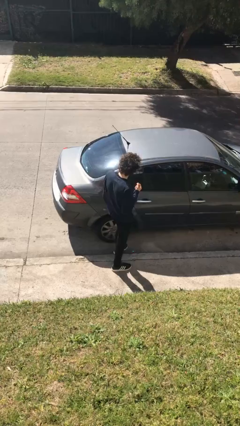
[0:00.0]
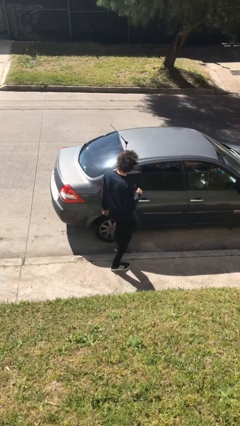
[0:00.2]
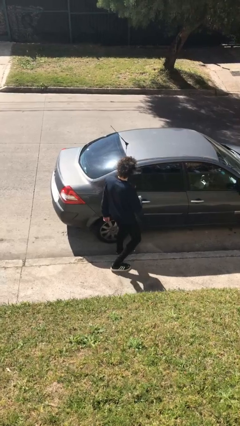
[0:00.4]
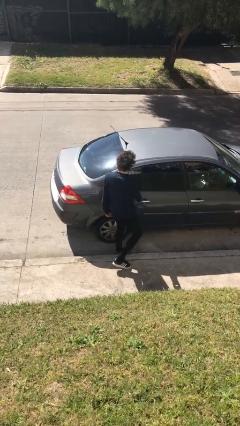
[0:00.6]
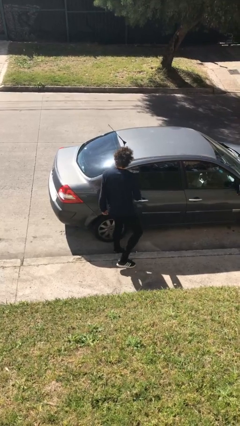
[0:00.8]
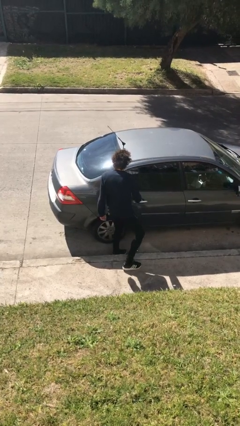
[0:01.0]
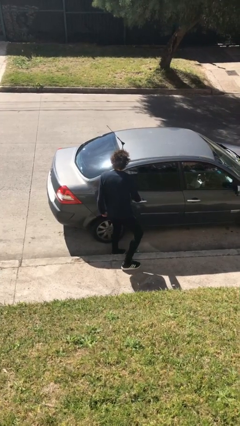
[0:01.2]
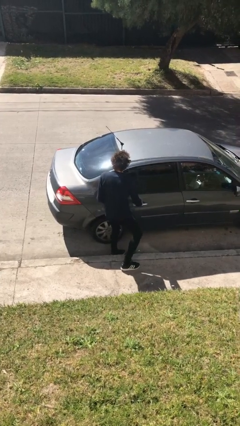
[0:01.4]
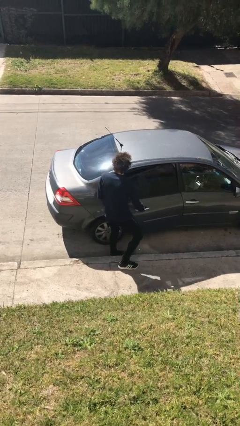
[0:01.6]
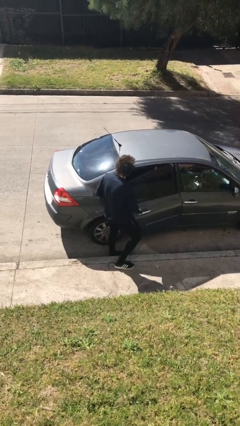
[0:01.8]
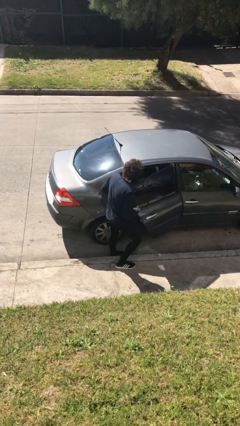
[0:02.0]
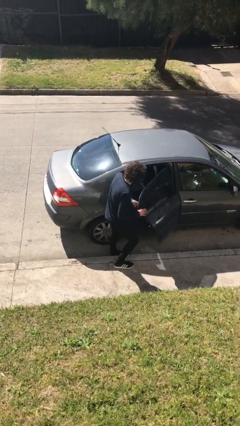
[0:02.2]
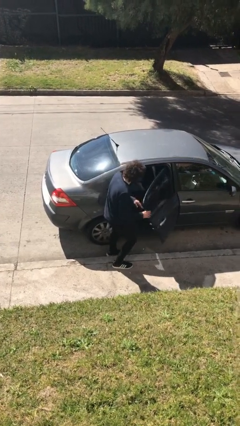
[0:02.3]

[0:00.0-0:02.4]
person opens car door

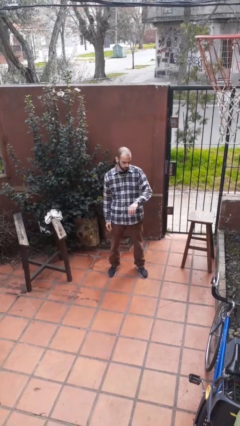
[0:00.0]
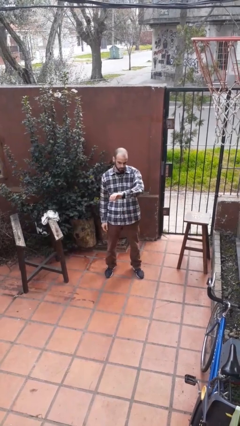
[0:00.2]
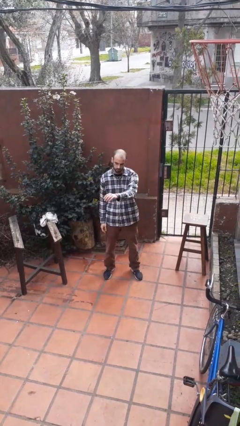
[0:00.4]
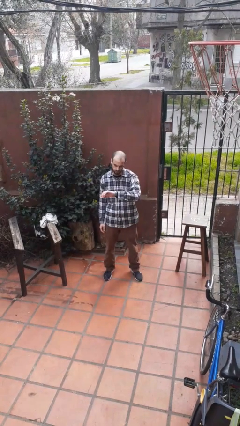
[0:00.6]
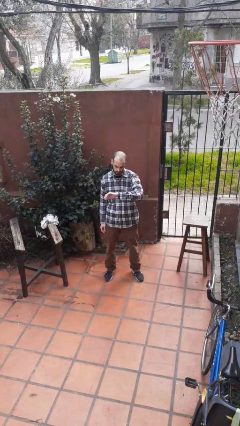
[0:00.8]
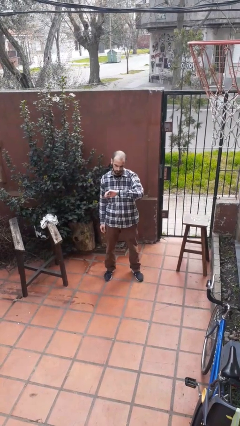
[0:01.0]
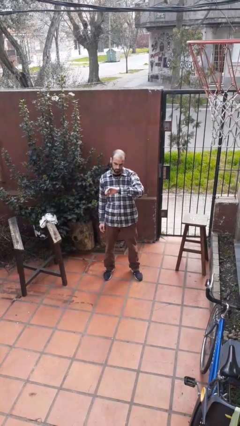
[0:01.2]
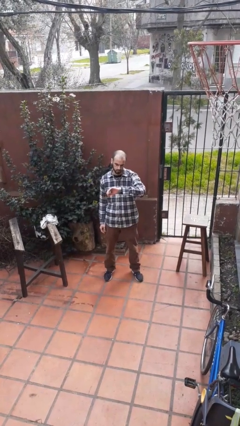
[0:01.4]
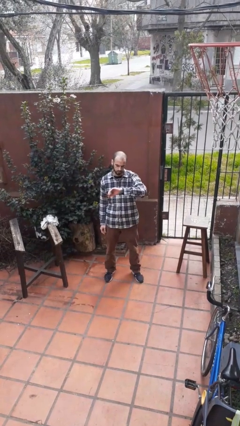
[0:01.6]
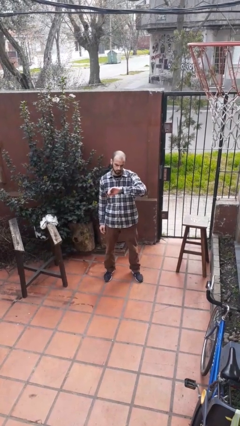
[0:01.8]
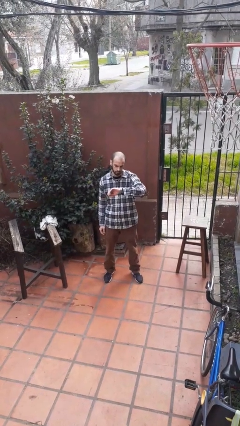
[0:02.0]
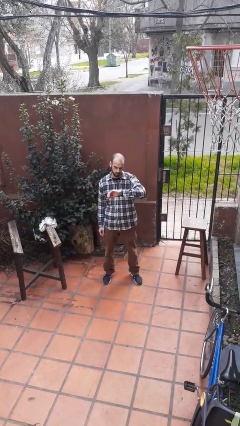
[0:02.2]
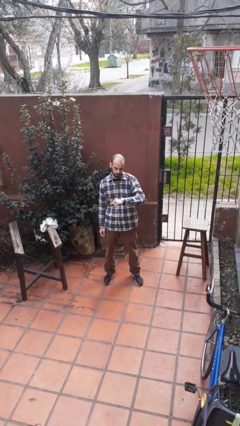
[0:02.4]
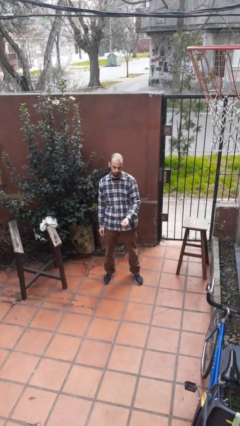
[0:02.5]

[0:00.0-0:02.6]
person looks at wristwatch

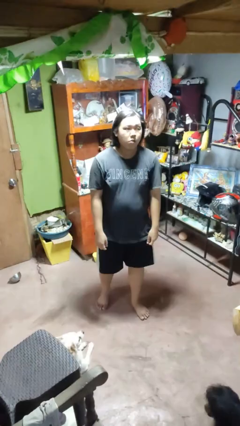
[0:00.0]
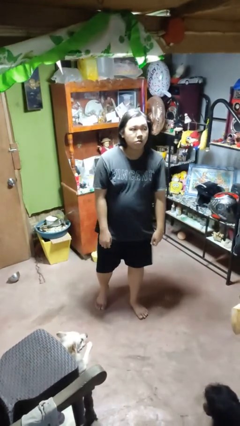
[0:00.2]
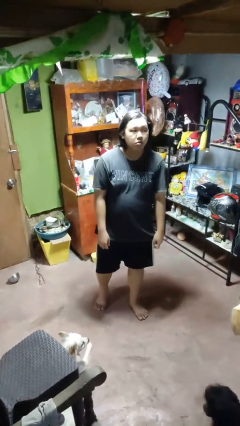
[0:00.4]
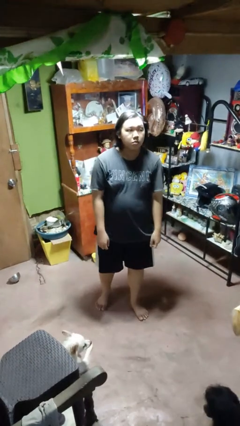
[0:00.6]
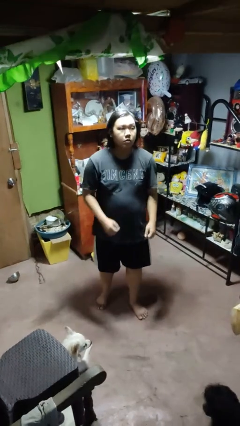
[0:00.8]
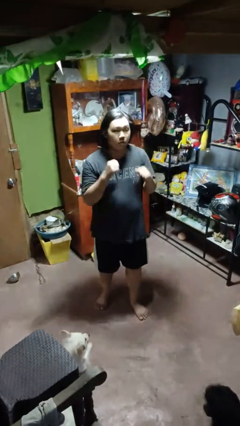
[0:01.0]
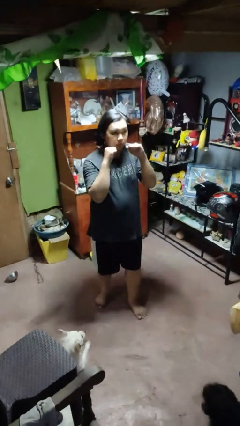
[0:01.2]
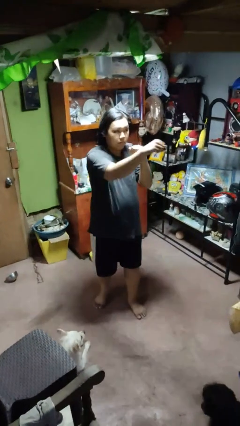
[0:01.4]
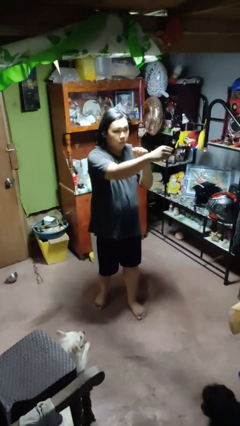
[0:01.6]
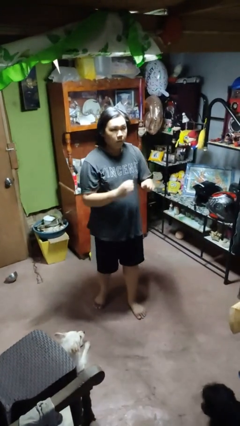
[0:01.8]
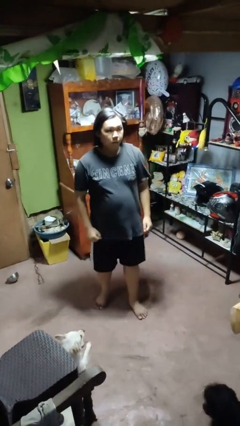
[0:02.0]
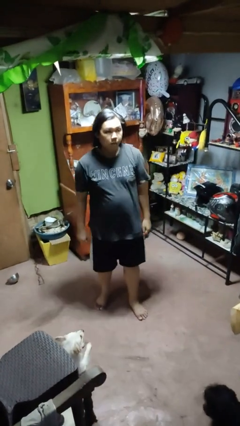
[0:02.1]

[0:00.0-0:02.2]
person punches

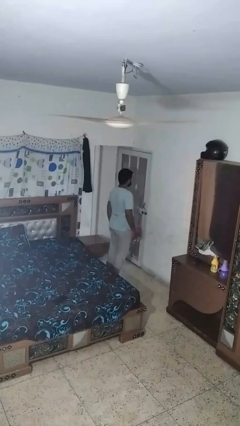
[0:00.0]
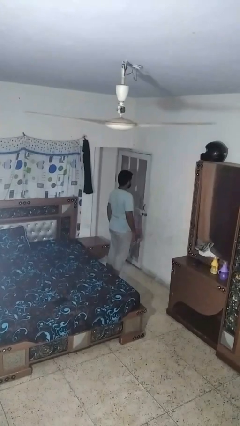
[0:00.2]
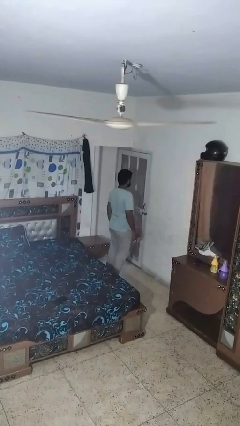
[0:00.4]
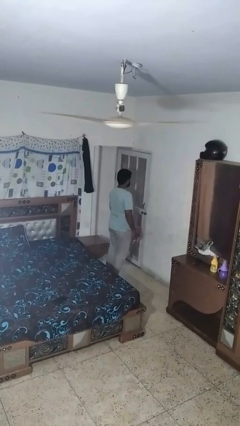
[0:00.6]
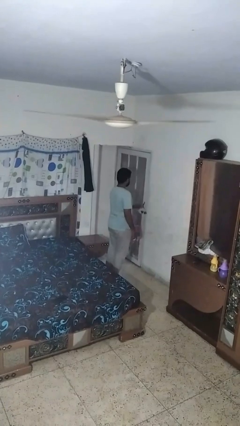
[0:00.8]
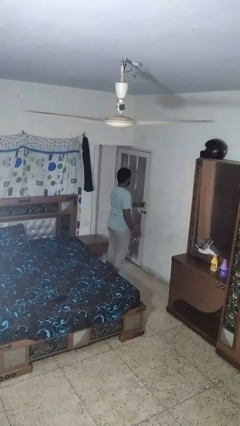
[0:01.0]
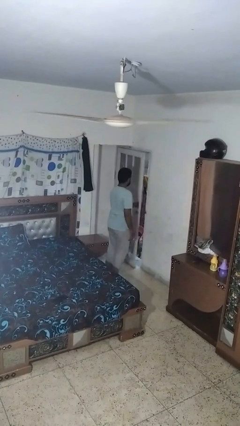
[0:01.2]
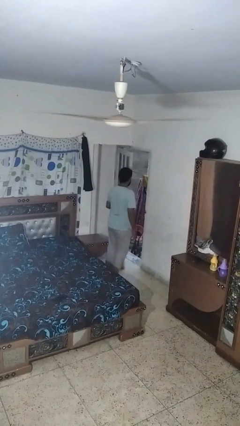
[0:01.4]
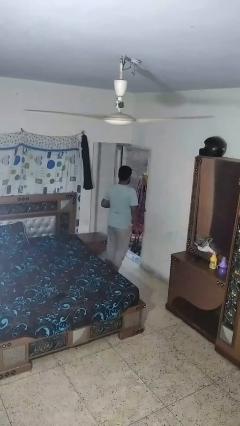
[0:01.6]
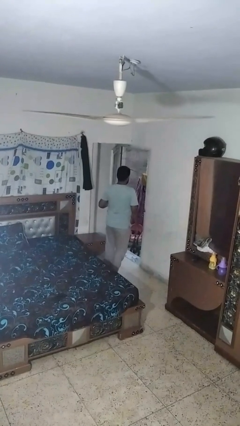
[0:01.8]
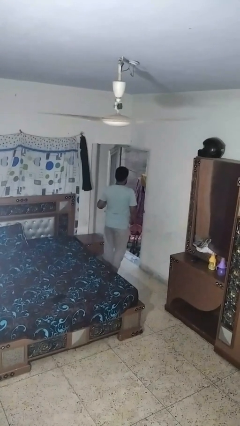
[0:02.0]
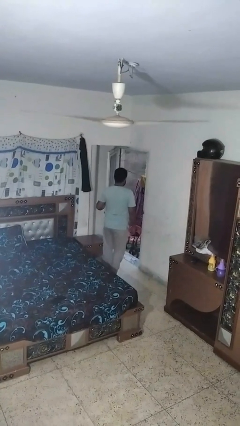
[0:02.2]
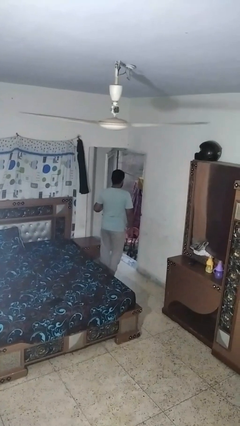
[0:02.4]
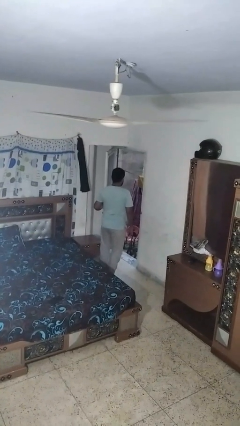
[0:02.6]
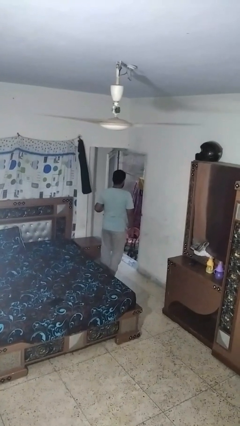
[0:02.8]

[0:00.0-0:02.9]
person opens gate

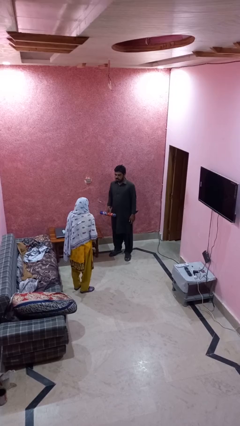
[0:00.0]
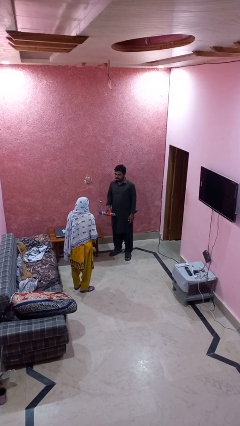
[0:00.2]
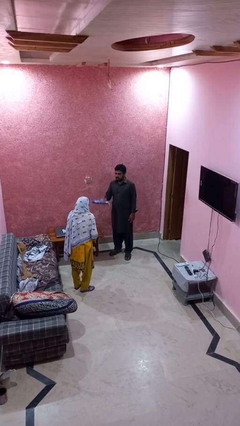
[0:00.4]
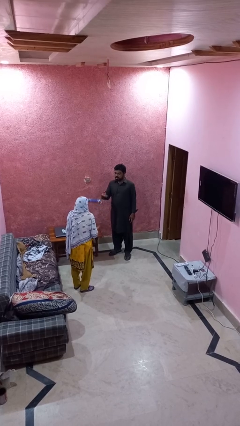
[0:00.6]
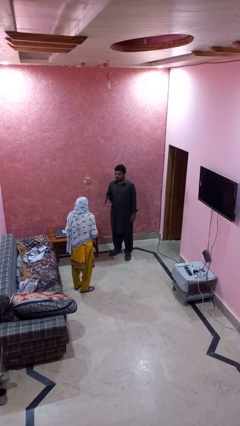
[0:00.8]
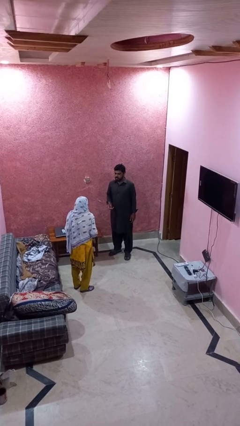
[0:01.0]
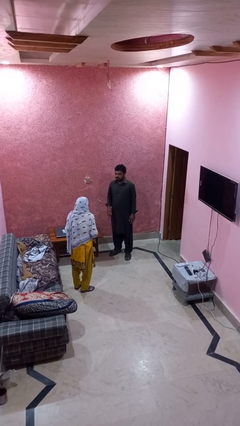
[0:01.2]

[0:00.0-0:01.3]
person throws object to person

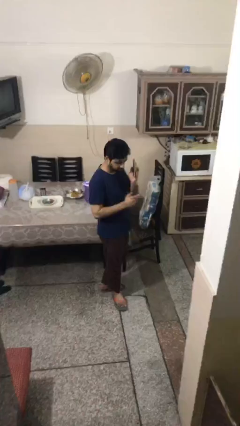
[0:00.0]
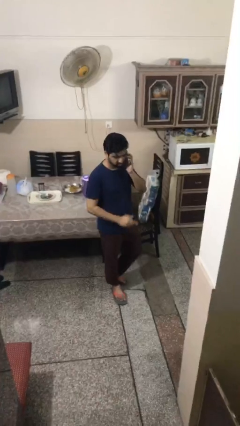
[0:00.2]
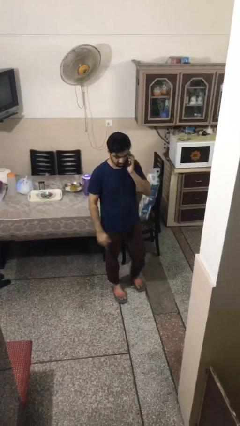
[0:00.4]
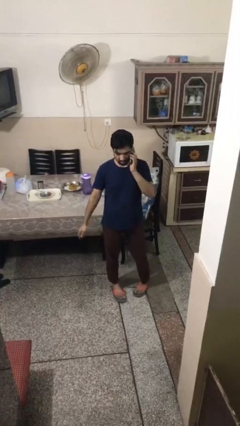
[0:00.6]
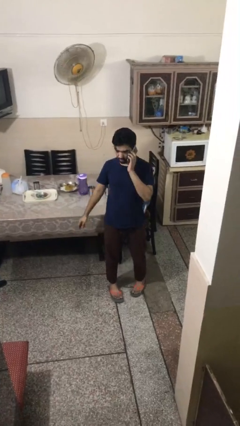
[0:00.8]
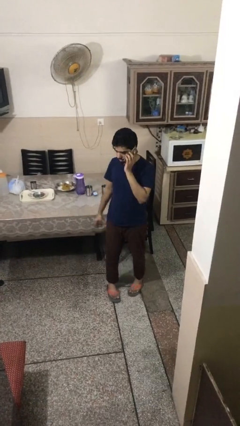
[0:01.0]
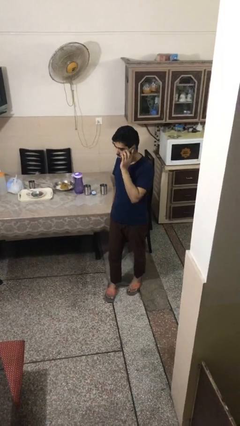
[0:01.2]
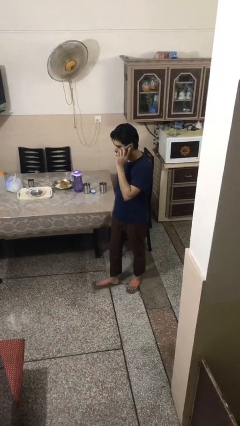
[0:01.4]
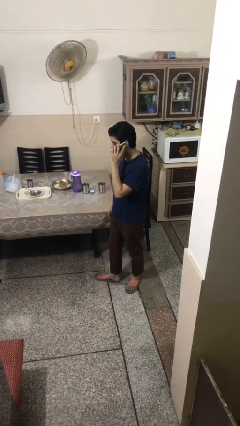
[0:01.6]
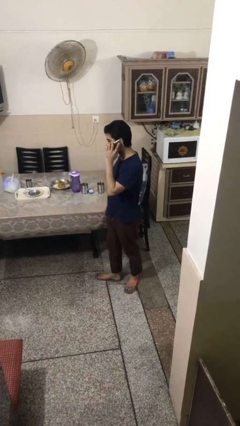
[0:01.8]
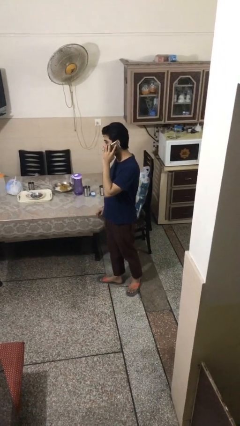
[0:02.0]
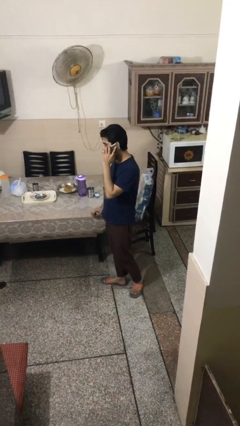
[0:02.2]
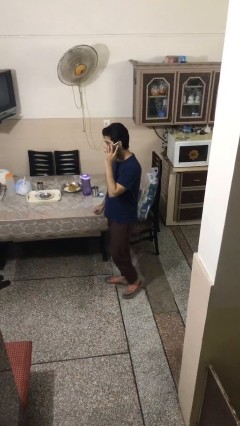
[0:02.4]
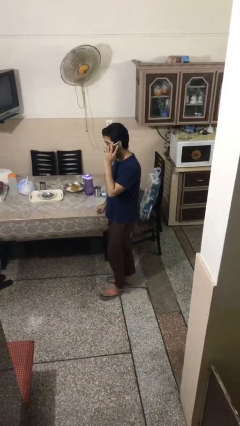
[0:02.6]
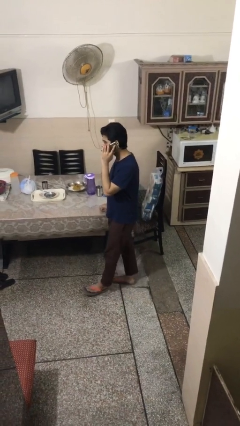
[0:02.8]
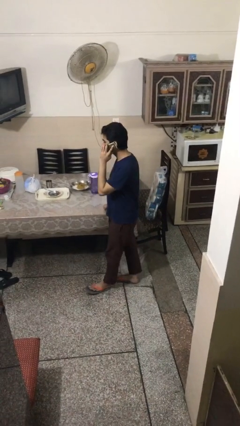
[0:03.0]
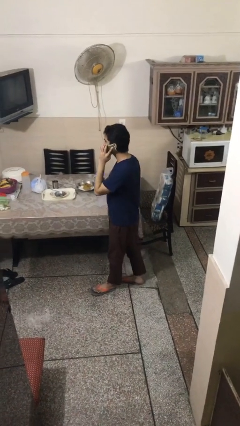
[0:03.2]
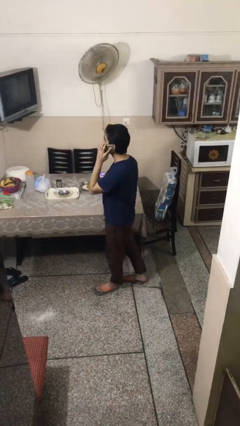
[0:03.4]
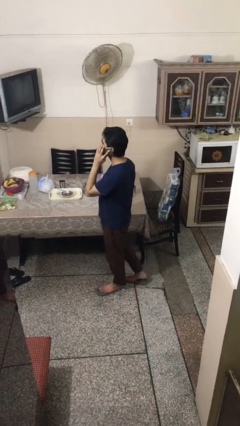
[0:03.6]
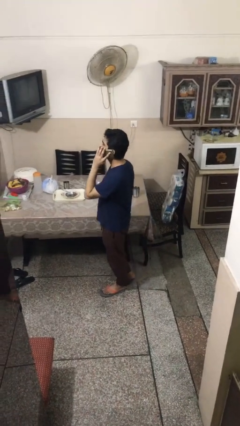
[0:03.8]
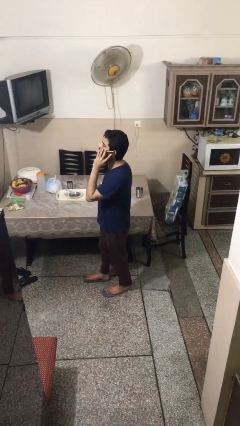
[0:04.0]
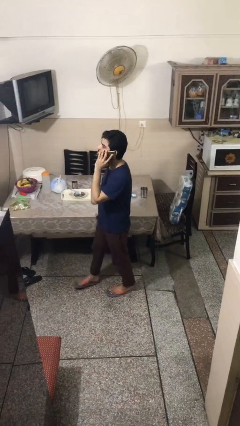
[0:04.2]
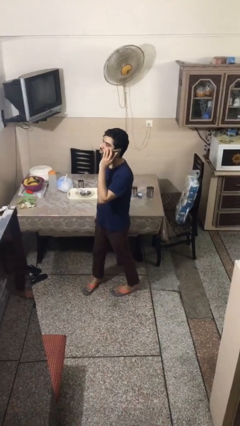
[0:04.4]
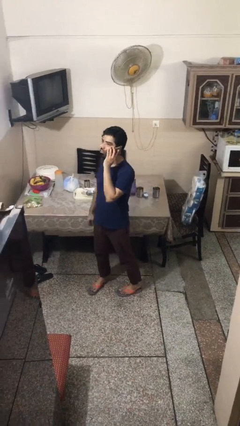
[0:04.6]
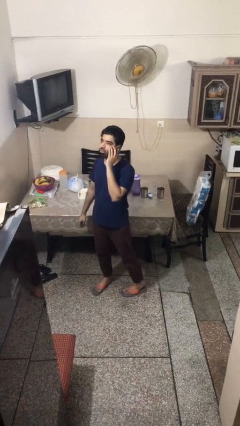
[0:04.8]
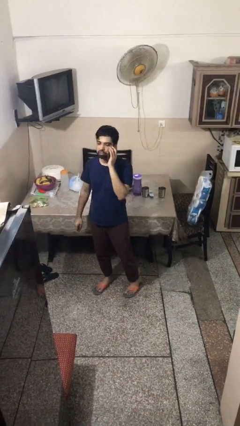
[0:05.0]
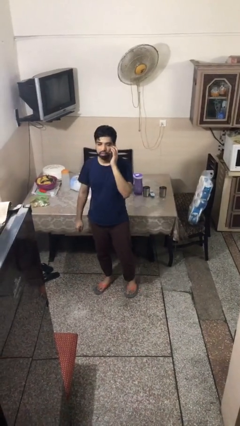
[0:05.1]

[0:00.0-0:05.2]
person talks on phone

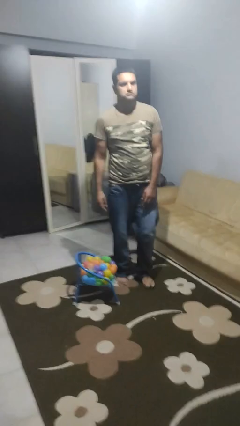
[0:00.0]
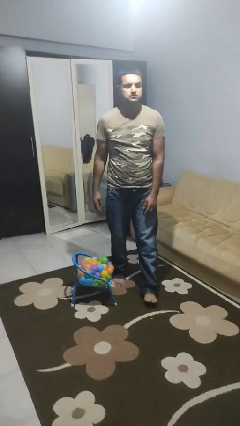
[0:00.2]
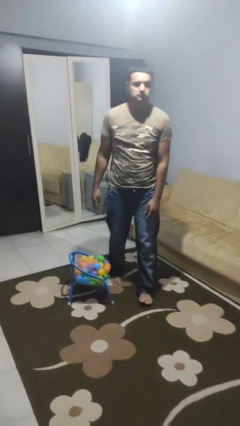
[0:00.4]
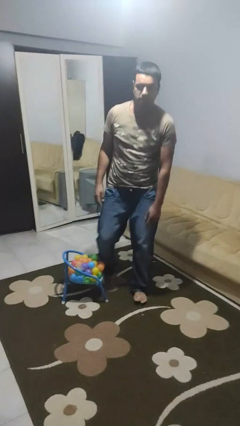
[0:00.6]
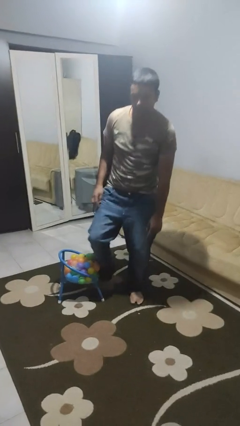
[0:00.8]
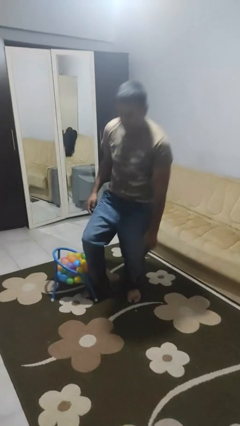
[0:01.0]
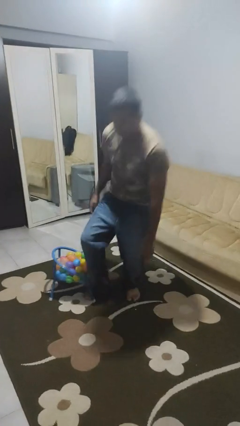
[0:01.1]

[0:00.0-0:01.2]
person trips on object on floor
